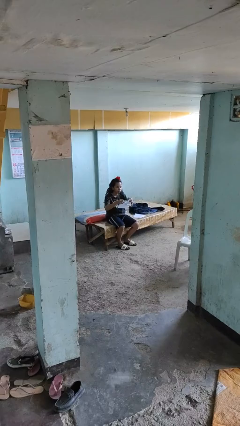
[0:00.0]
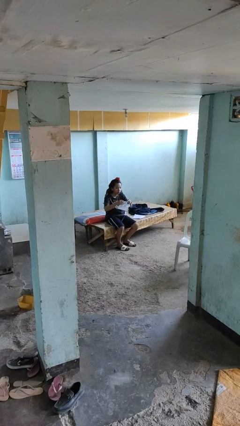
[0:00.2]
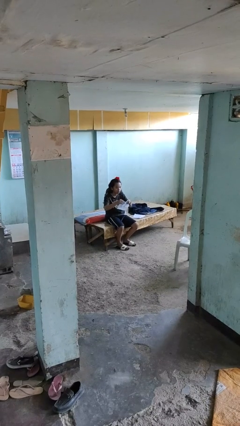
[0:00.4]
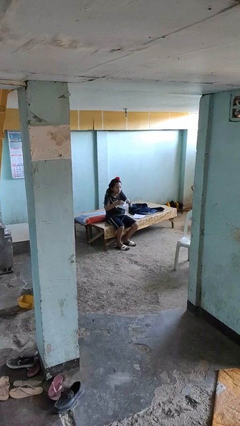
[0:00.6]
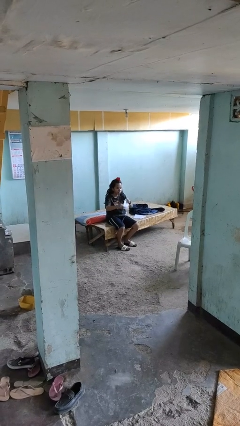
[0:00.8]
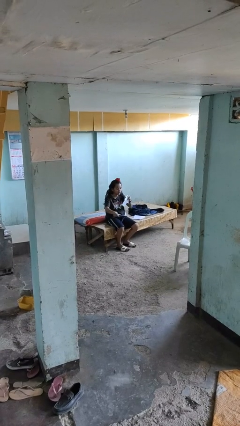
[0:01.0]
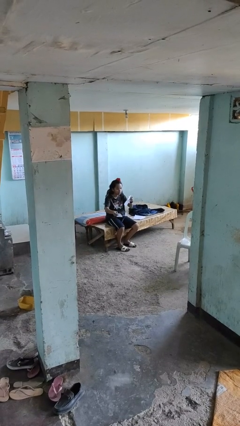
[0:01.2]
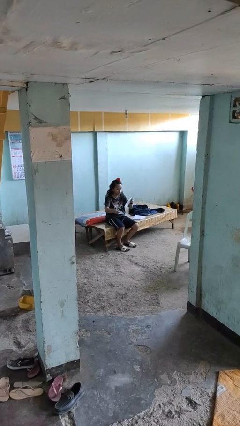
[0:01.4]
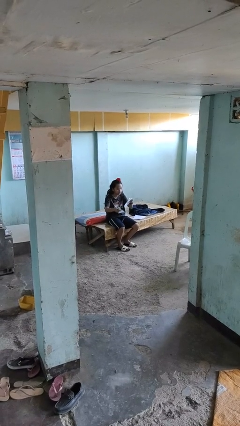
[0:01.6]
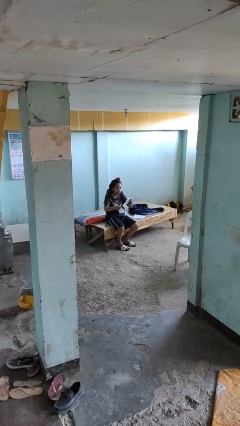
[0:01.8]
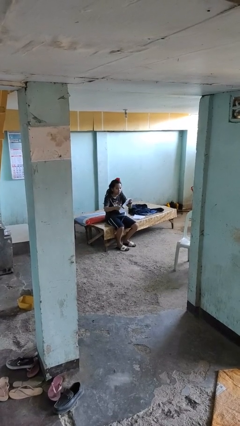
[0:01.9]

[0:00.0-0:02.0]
person tears paper

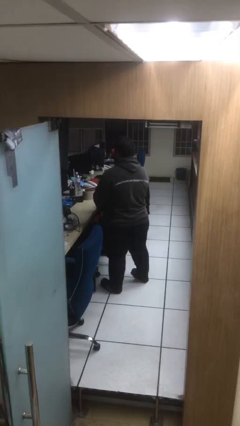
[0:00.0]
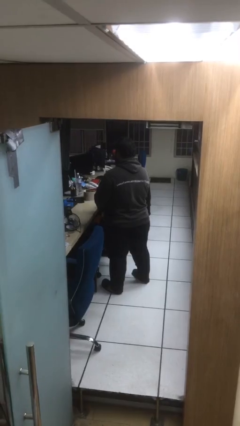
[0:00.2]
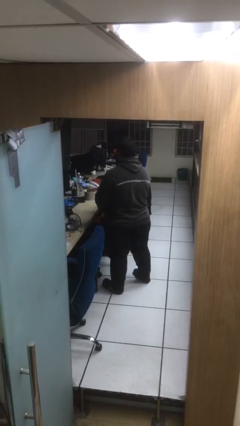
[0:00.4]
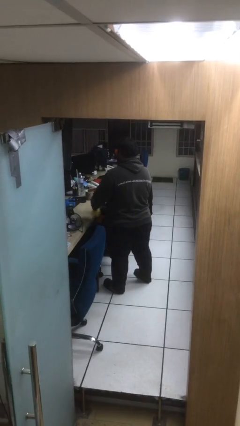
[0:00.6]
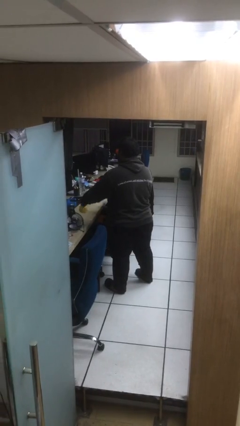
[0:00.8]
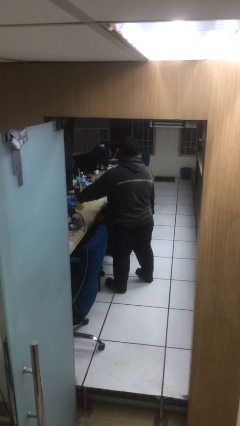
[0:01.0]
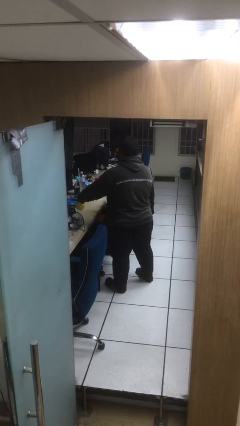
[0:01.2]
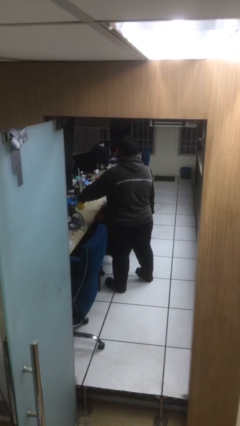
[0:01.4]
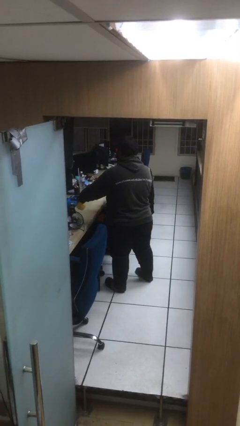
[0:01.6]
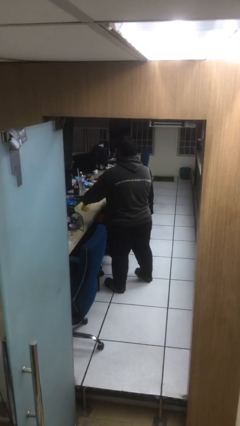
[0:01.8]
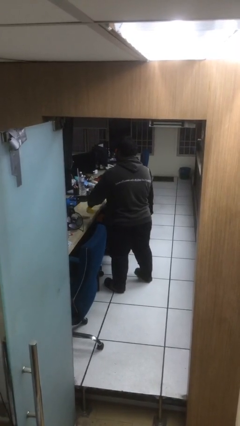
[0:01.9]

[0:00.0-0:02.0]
person sprays from bottle

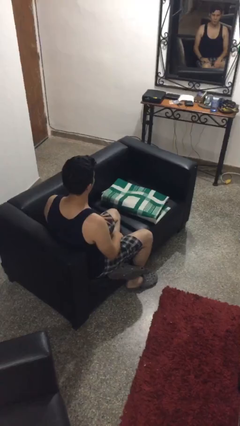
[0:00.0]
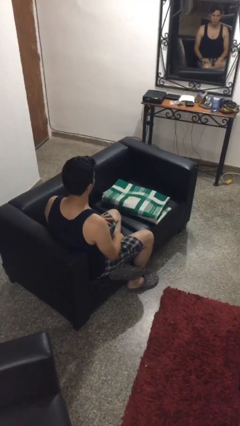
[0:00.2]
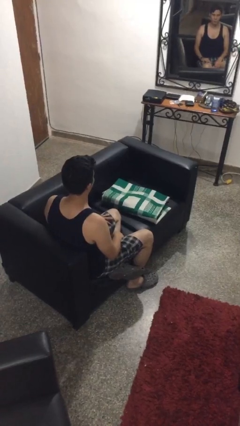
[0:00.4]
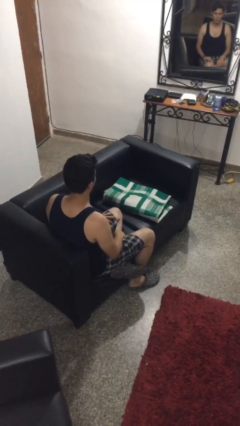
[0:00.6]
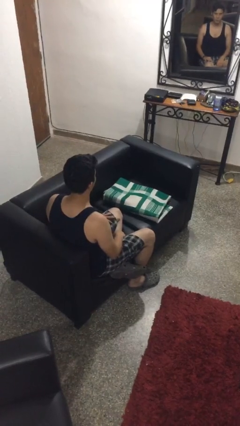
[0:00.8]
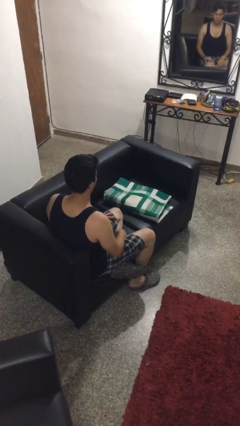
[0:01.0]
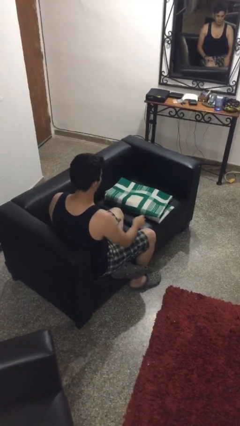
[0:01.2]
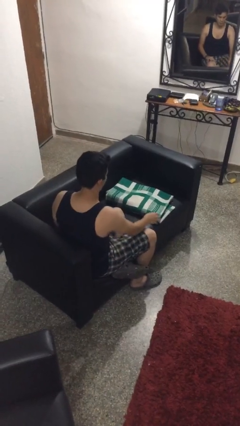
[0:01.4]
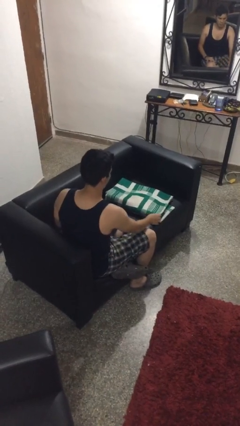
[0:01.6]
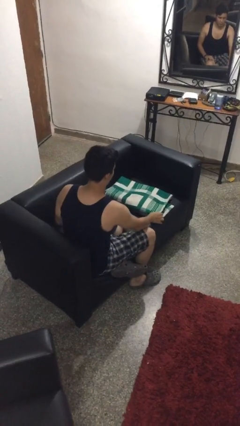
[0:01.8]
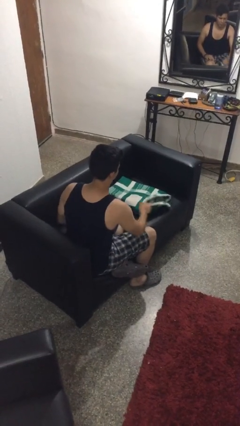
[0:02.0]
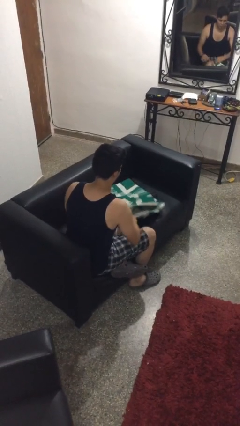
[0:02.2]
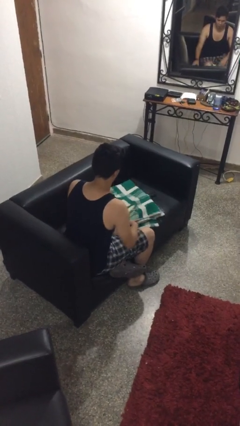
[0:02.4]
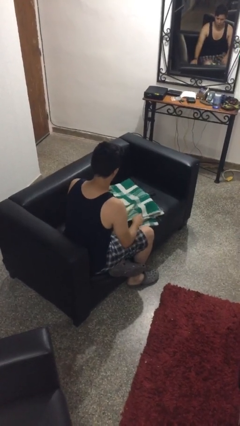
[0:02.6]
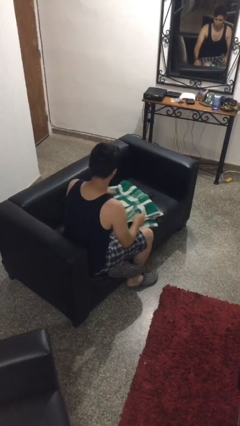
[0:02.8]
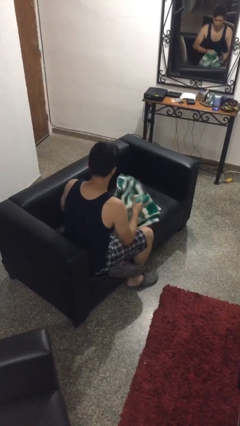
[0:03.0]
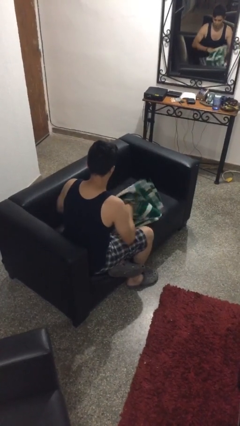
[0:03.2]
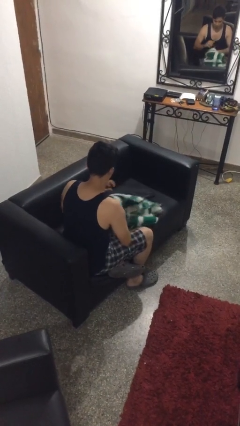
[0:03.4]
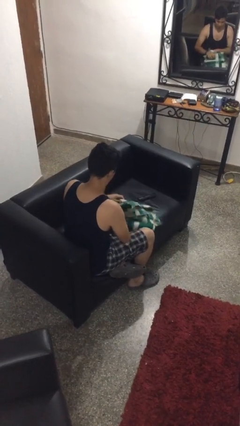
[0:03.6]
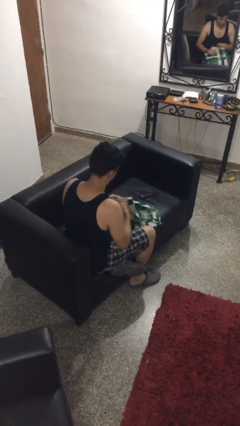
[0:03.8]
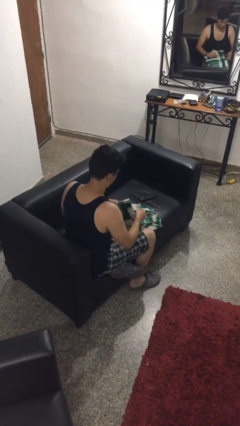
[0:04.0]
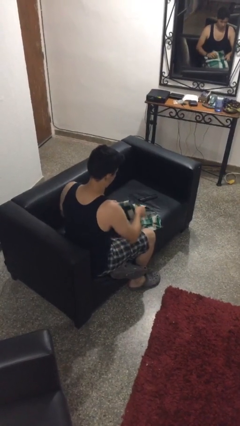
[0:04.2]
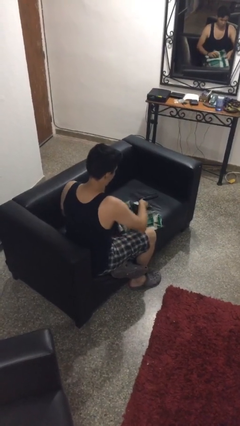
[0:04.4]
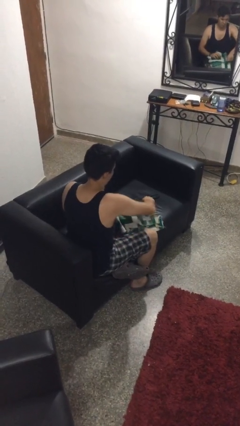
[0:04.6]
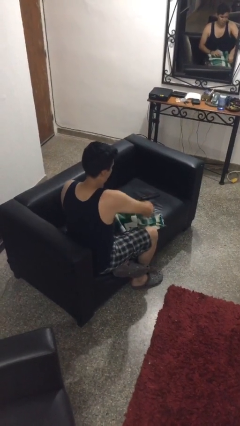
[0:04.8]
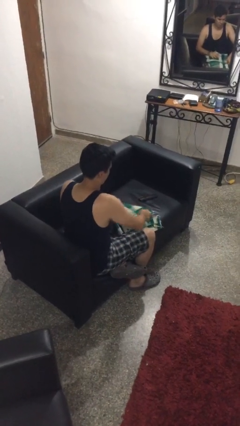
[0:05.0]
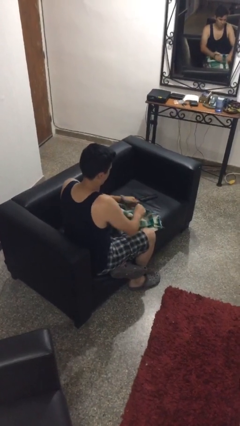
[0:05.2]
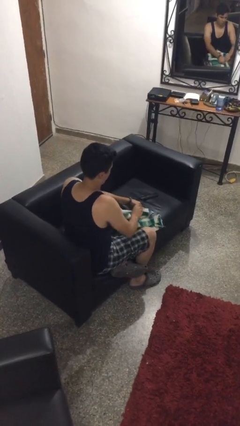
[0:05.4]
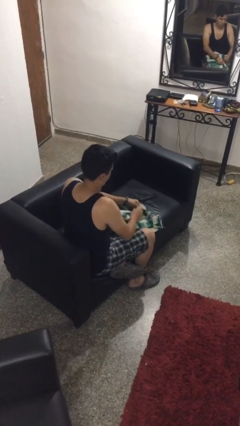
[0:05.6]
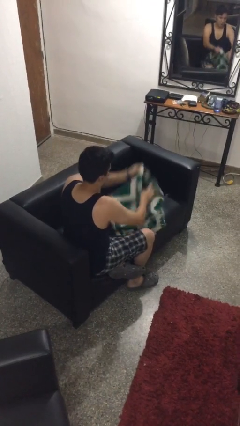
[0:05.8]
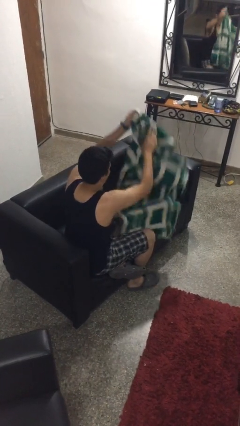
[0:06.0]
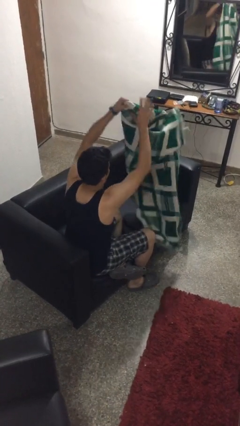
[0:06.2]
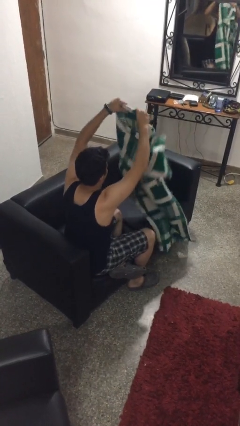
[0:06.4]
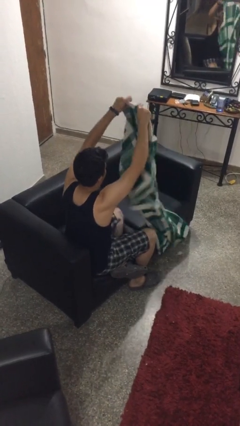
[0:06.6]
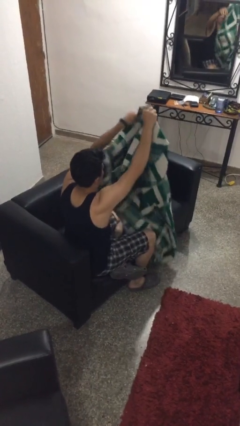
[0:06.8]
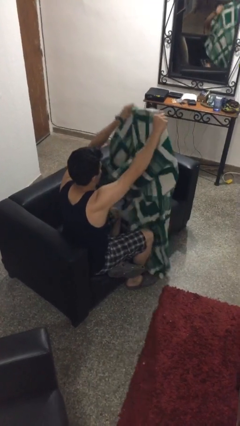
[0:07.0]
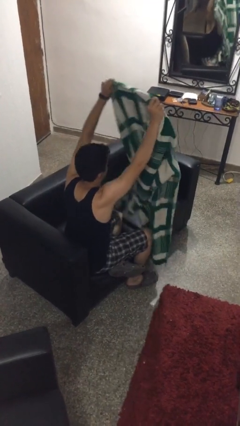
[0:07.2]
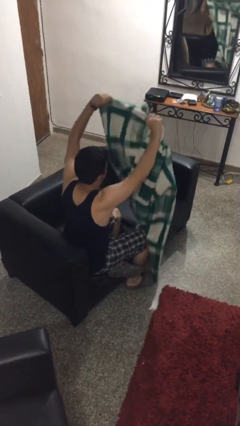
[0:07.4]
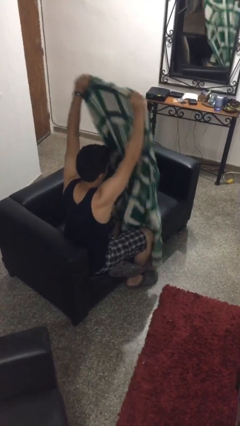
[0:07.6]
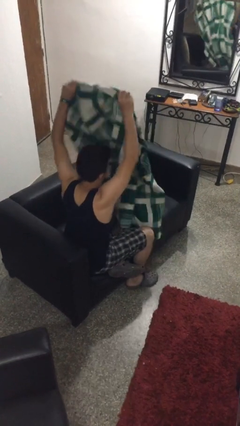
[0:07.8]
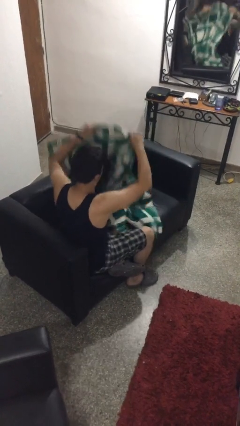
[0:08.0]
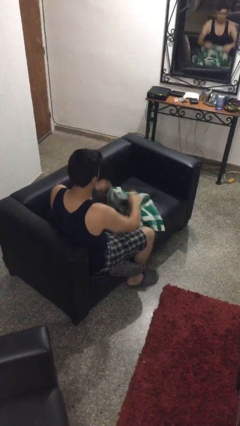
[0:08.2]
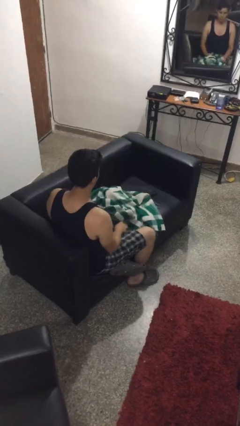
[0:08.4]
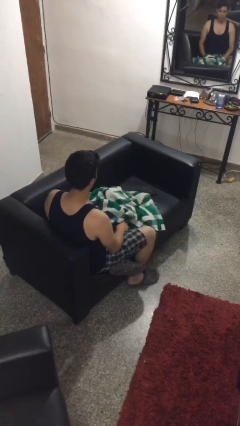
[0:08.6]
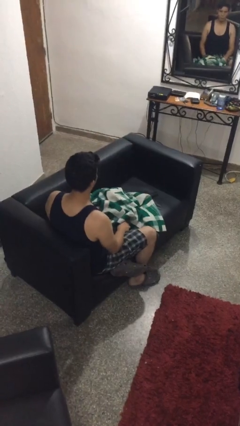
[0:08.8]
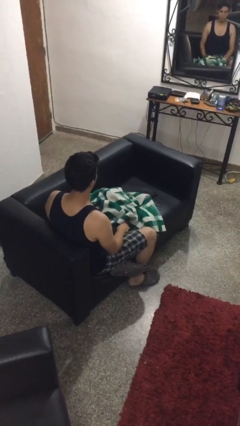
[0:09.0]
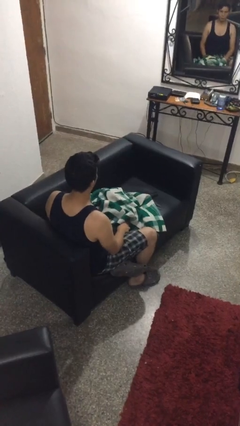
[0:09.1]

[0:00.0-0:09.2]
person unfolds blanket

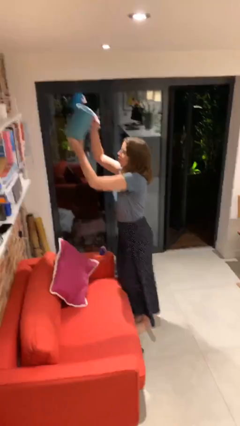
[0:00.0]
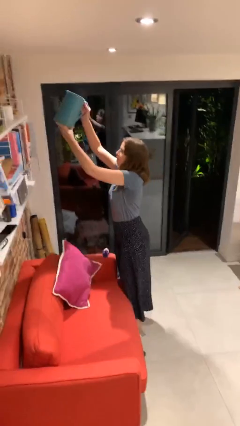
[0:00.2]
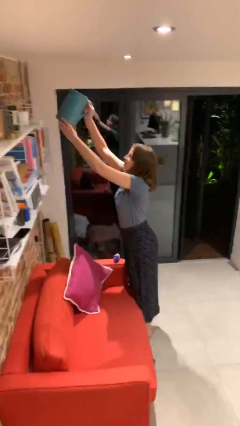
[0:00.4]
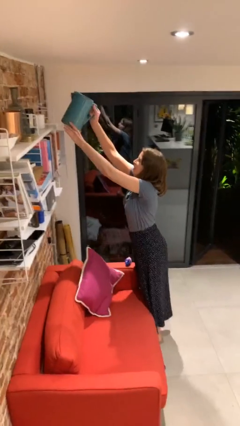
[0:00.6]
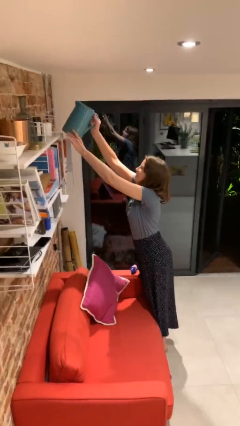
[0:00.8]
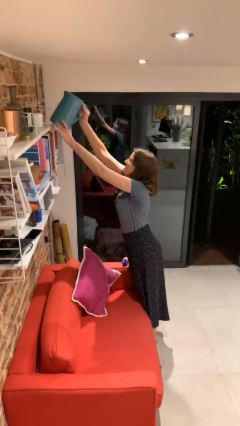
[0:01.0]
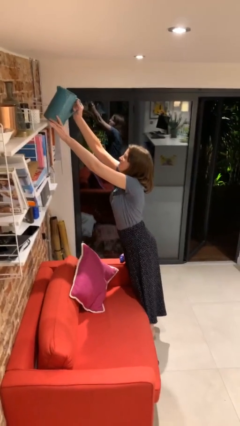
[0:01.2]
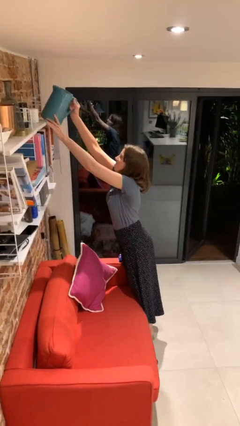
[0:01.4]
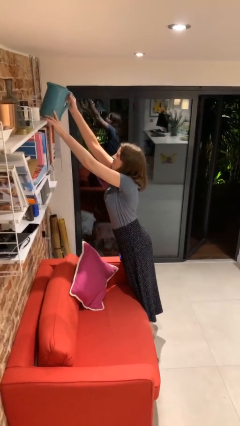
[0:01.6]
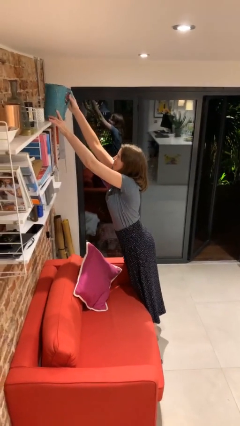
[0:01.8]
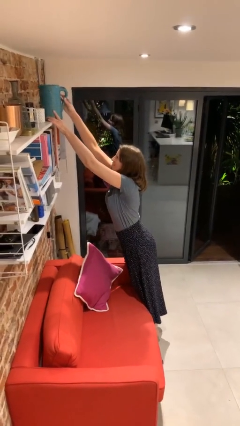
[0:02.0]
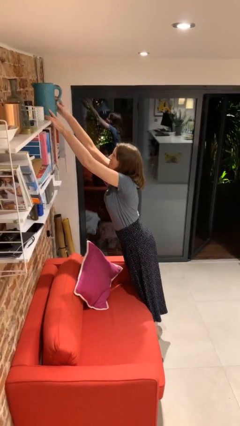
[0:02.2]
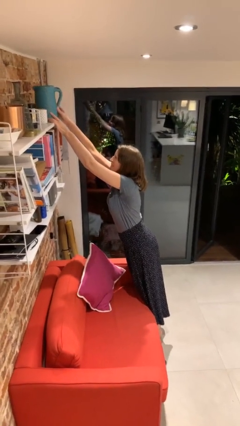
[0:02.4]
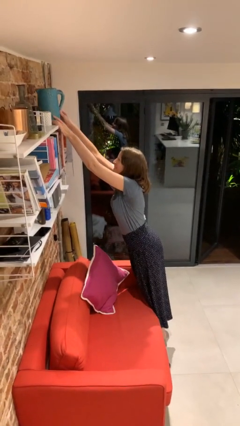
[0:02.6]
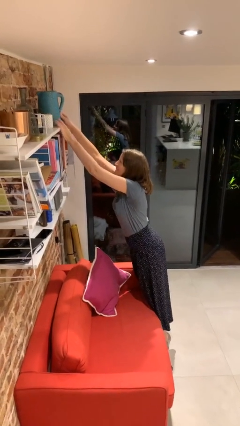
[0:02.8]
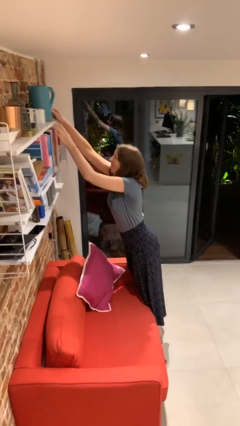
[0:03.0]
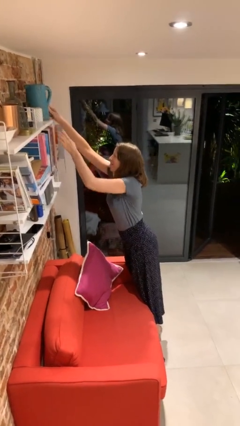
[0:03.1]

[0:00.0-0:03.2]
person puts down object on shelf

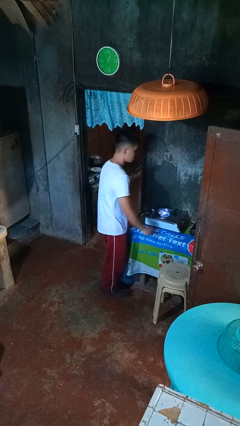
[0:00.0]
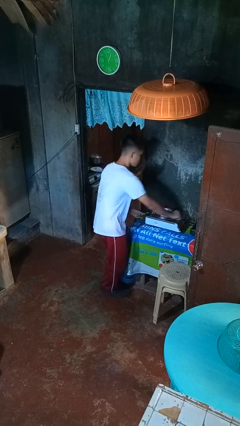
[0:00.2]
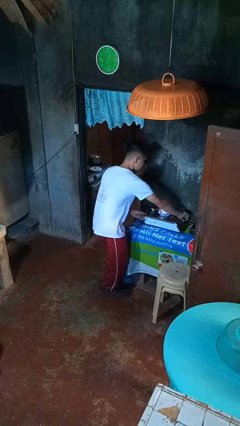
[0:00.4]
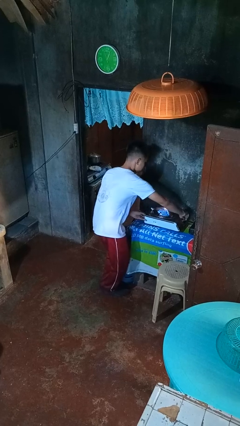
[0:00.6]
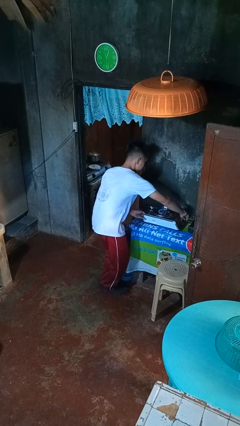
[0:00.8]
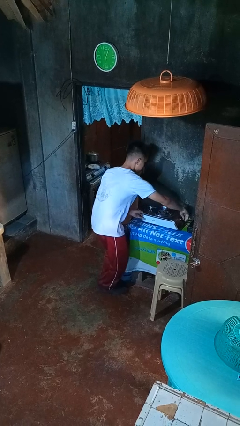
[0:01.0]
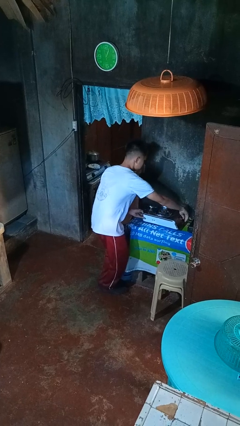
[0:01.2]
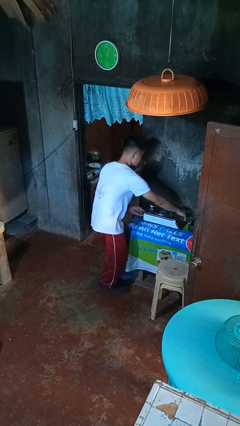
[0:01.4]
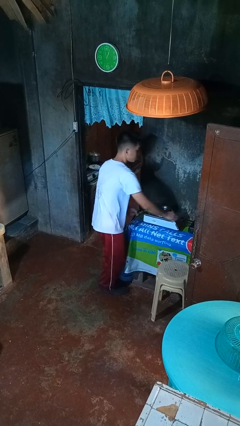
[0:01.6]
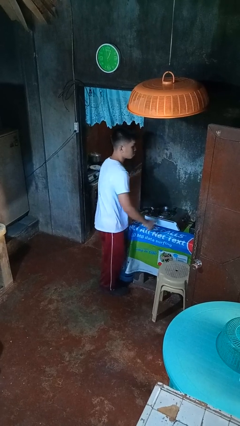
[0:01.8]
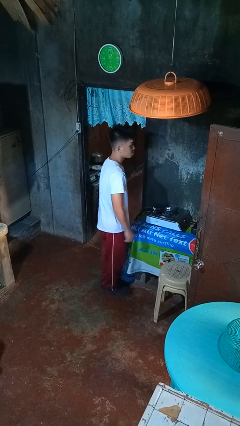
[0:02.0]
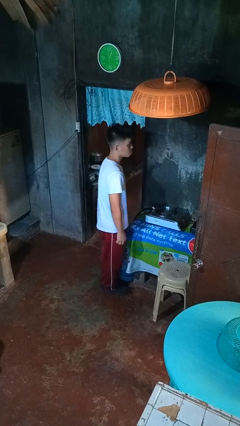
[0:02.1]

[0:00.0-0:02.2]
person turns off stovetop
